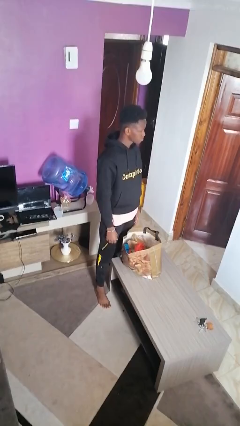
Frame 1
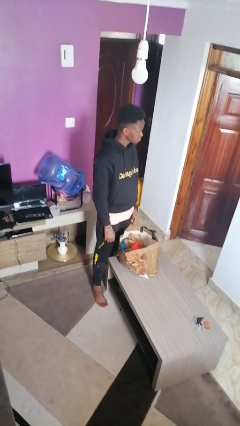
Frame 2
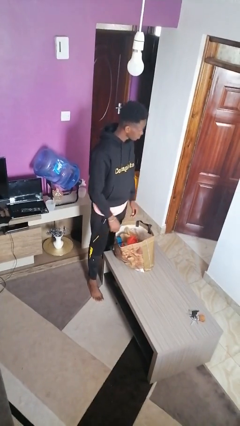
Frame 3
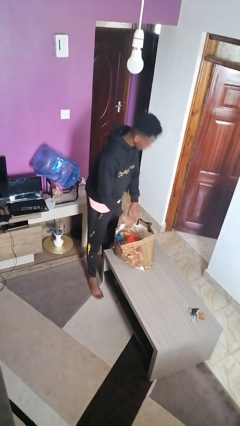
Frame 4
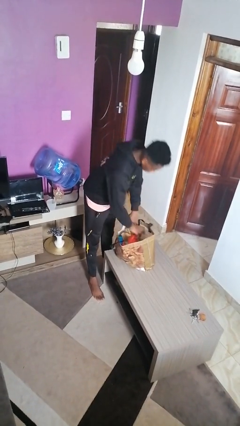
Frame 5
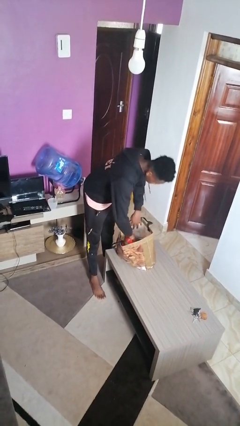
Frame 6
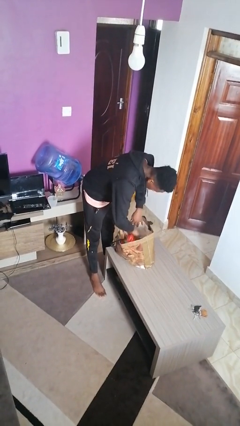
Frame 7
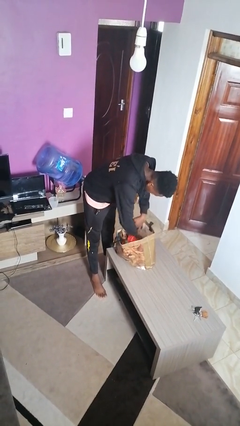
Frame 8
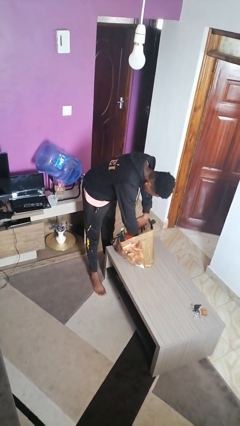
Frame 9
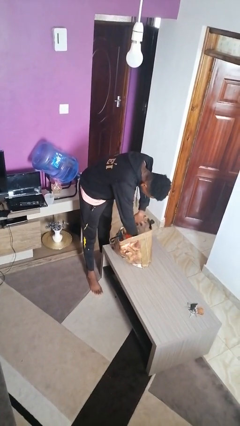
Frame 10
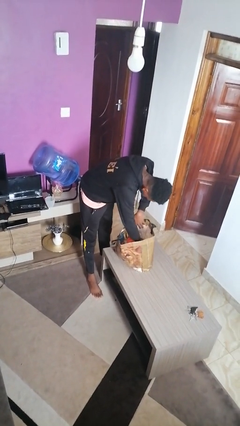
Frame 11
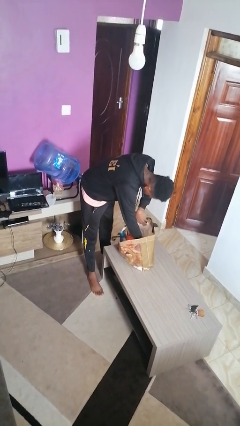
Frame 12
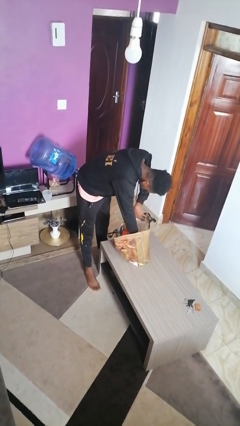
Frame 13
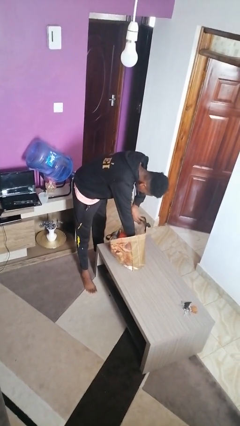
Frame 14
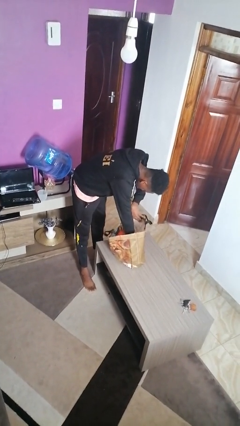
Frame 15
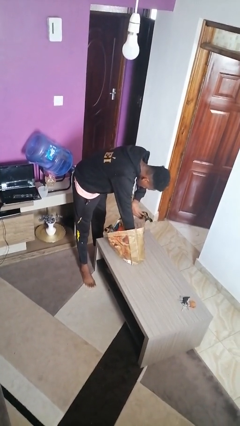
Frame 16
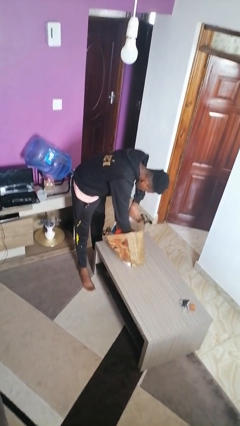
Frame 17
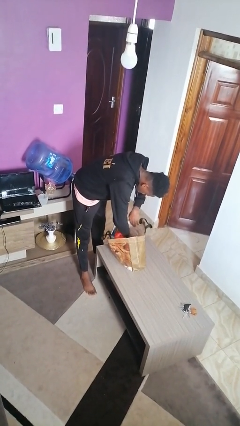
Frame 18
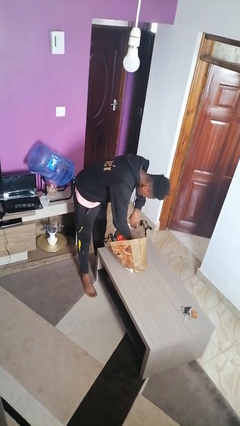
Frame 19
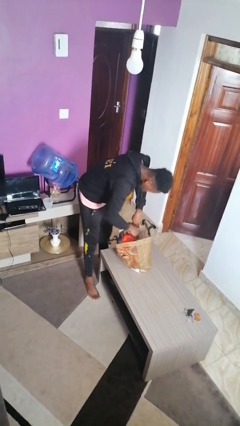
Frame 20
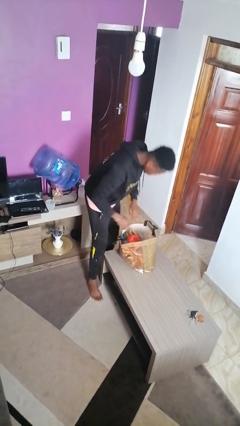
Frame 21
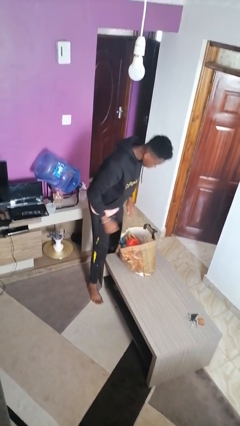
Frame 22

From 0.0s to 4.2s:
person searches in bag

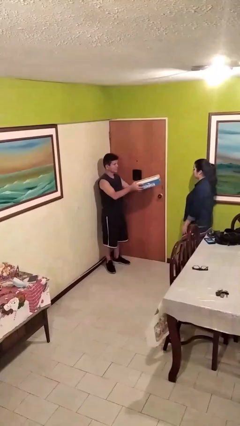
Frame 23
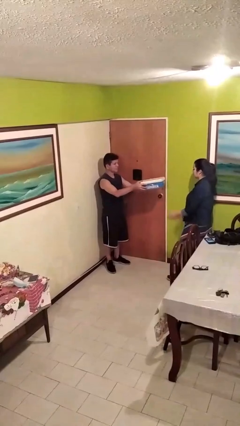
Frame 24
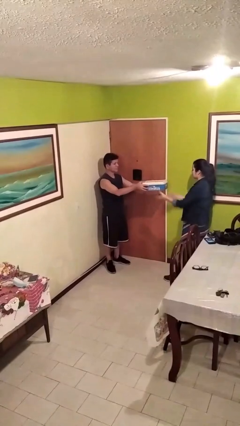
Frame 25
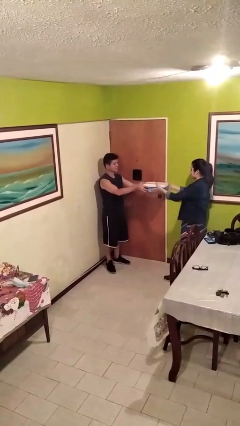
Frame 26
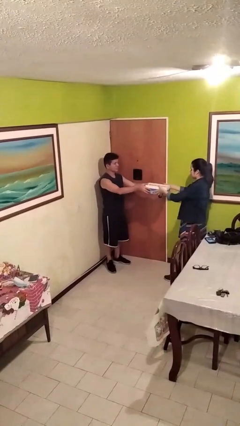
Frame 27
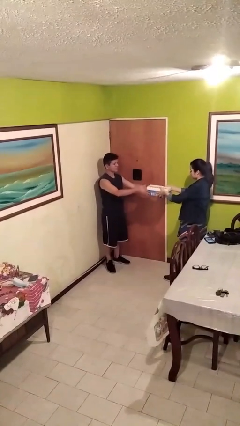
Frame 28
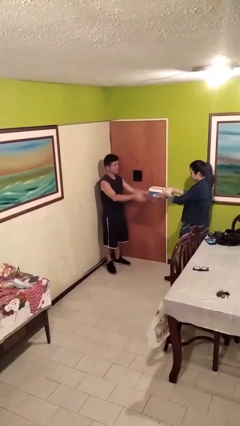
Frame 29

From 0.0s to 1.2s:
person transfers object to person

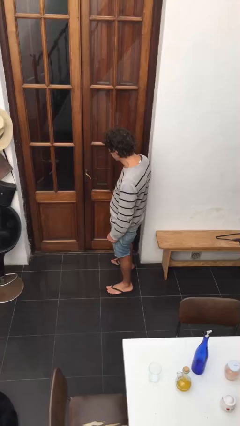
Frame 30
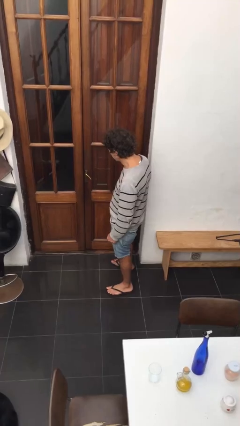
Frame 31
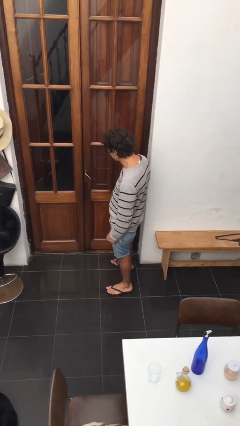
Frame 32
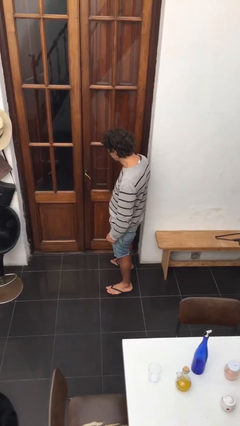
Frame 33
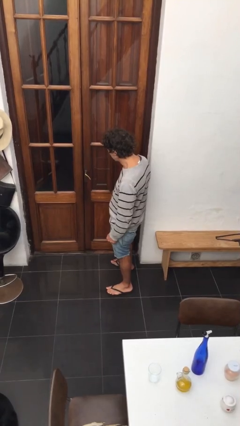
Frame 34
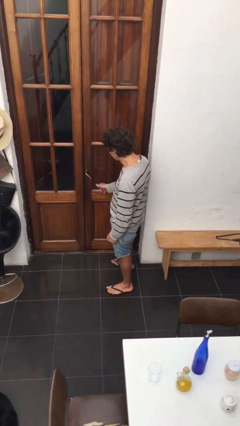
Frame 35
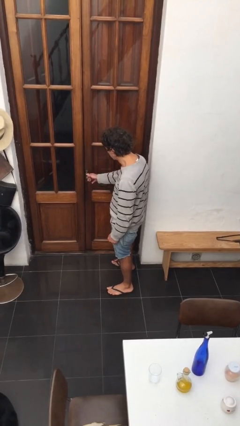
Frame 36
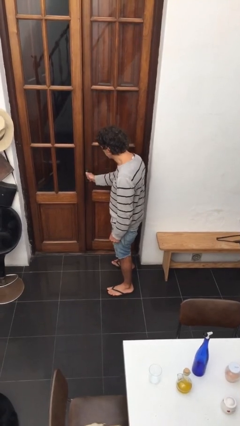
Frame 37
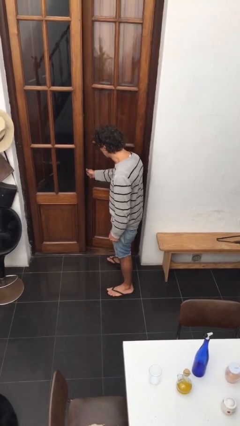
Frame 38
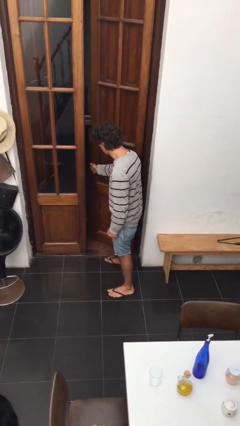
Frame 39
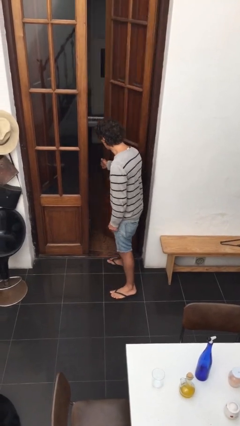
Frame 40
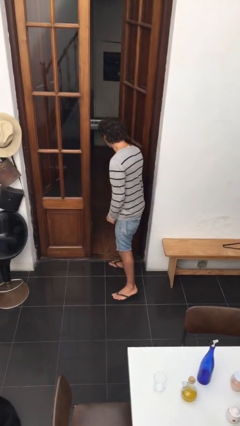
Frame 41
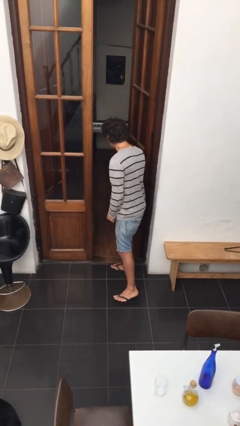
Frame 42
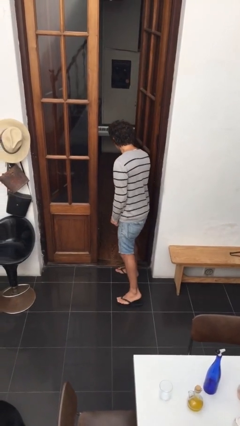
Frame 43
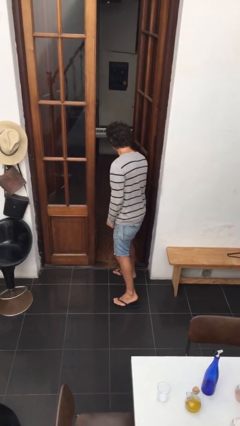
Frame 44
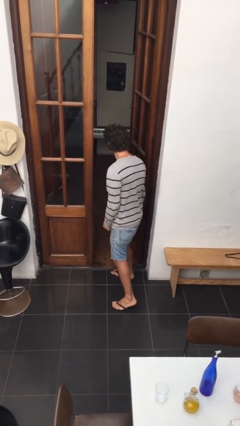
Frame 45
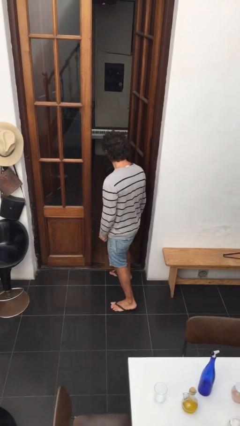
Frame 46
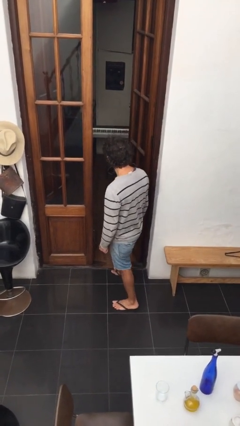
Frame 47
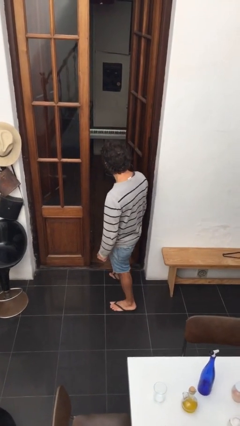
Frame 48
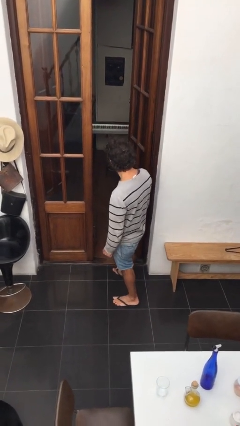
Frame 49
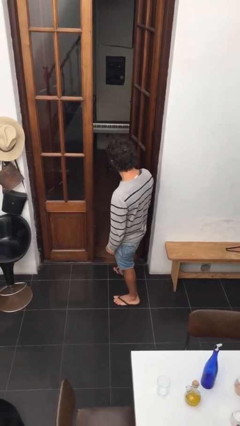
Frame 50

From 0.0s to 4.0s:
person opens facility door

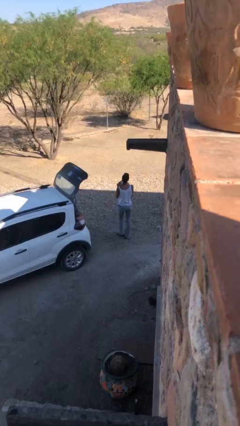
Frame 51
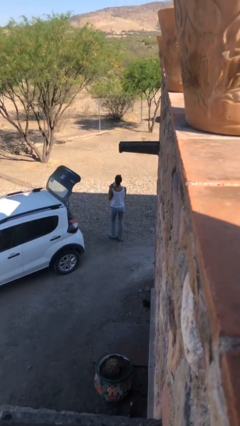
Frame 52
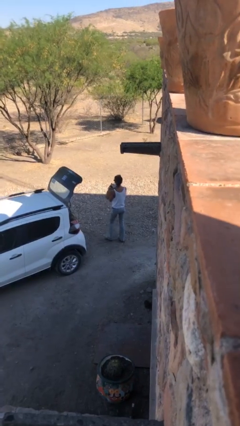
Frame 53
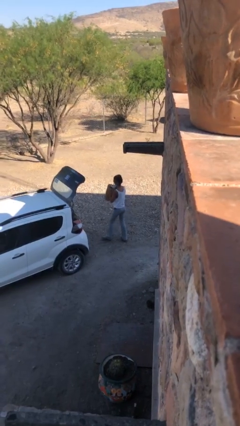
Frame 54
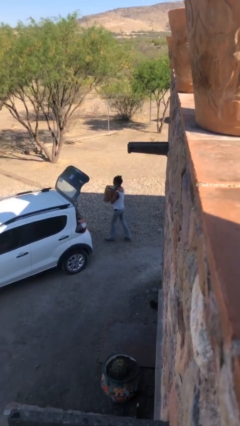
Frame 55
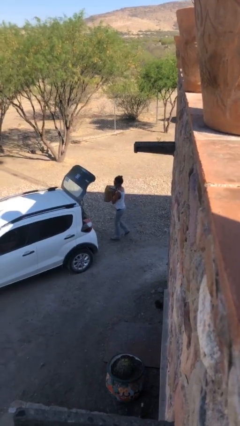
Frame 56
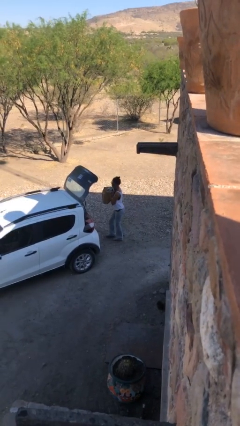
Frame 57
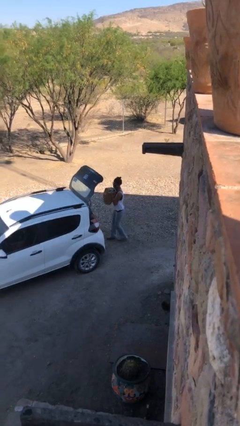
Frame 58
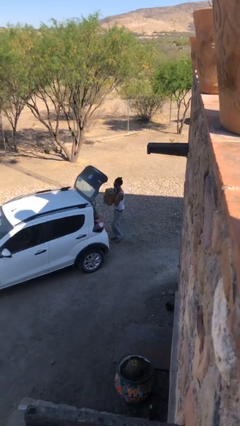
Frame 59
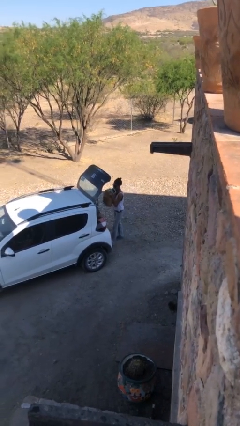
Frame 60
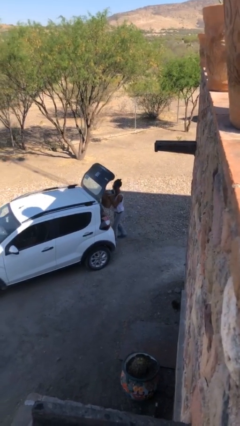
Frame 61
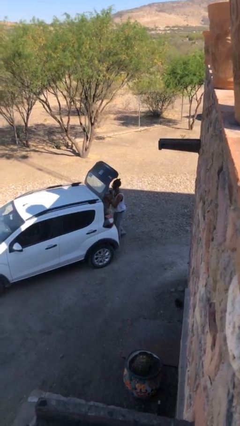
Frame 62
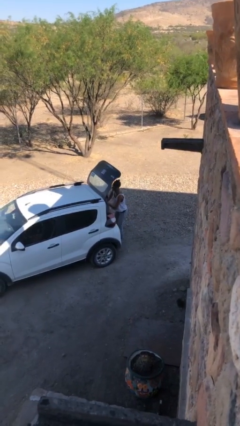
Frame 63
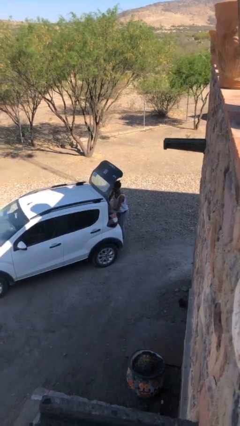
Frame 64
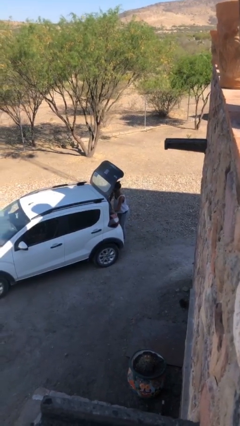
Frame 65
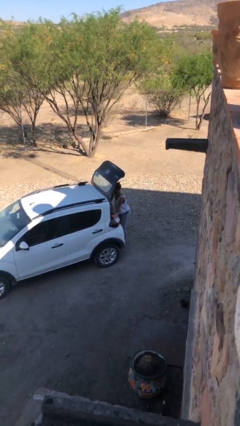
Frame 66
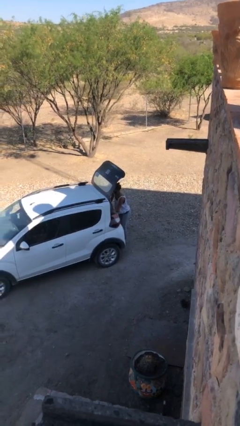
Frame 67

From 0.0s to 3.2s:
person loads car

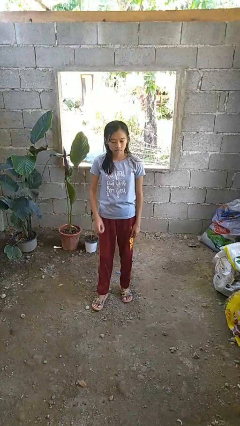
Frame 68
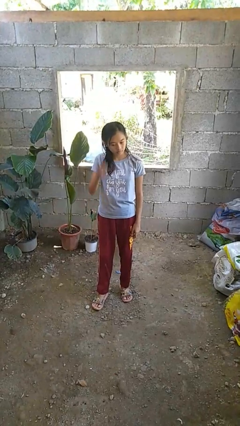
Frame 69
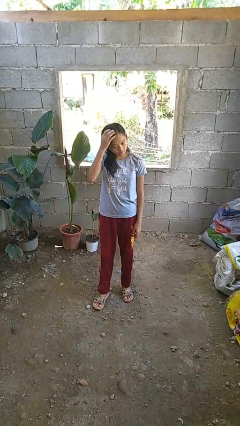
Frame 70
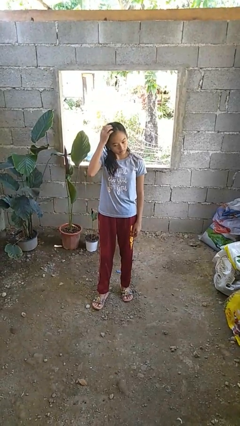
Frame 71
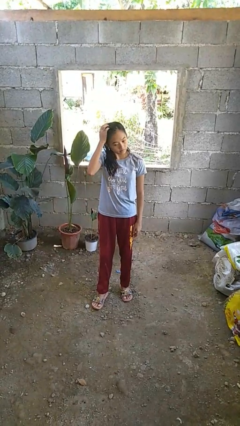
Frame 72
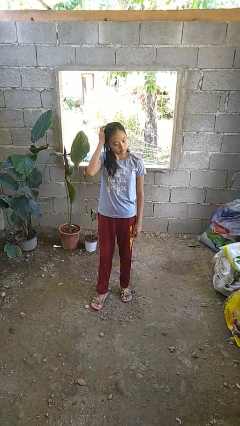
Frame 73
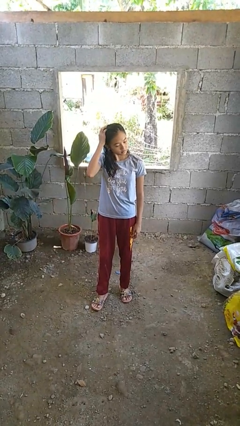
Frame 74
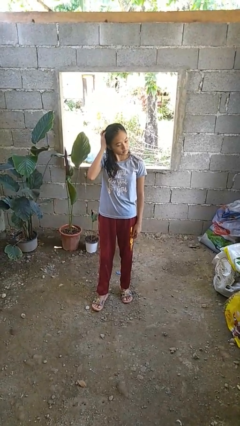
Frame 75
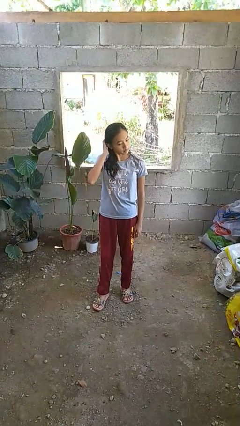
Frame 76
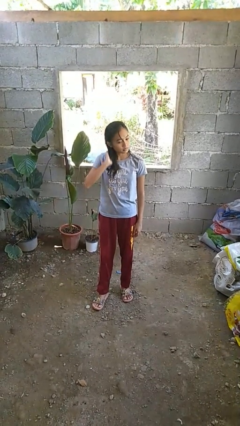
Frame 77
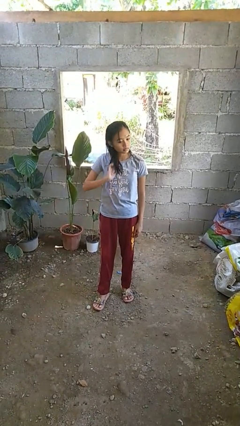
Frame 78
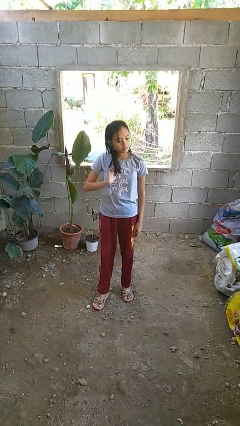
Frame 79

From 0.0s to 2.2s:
person scratches face

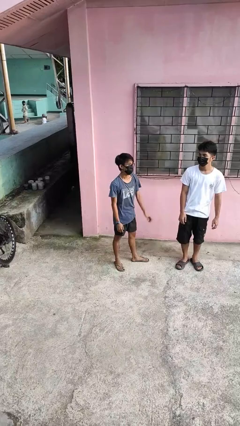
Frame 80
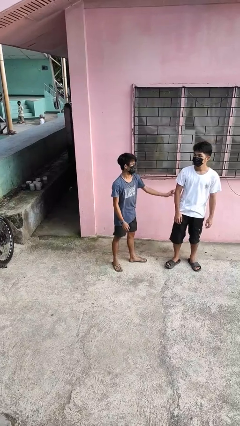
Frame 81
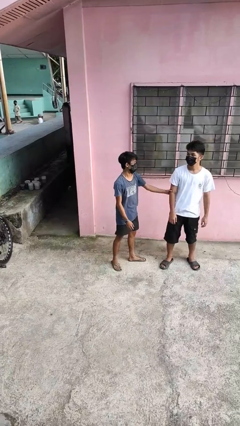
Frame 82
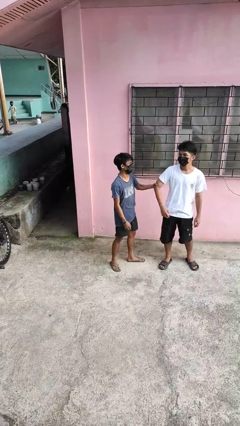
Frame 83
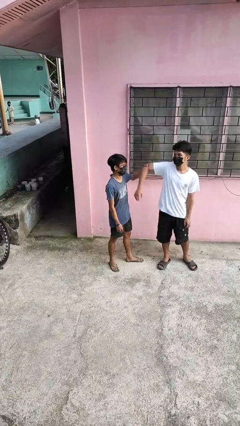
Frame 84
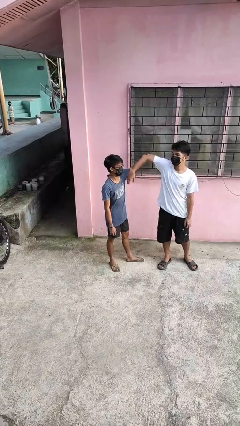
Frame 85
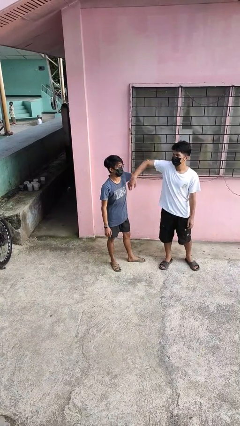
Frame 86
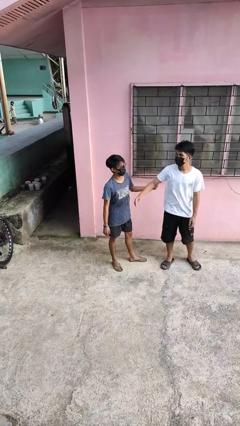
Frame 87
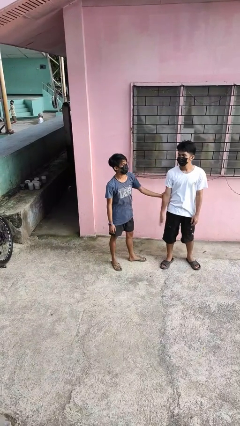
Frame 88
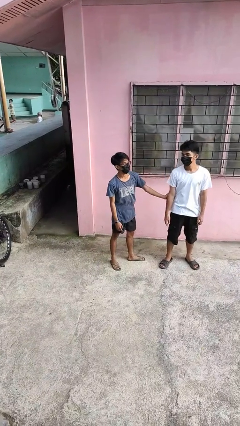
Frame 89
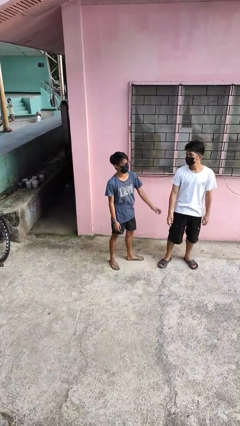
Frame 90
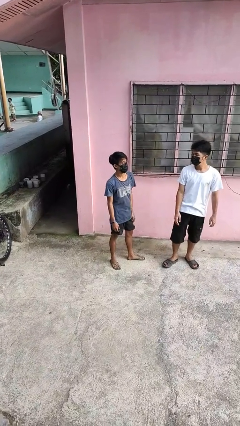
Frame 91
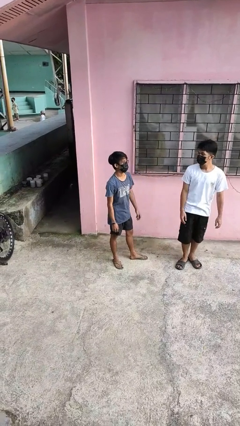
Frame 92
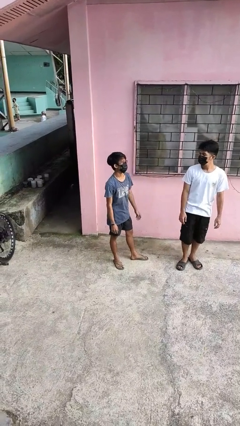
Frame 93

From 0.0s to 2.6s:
person grabs person by bicep
